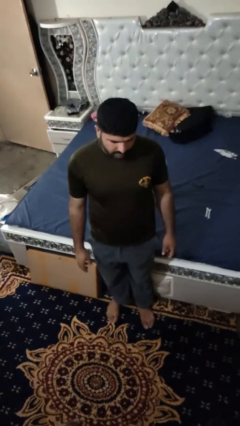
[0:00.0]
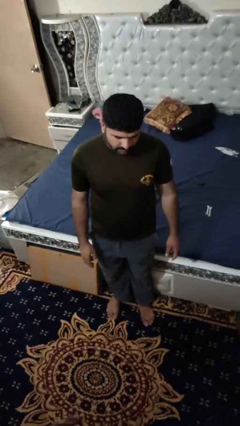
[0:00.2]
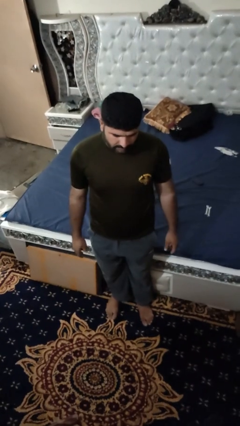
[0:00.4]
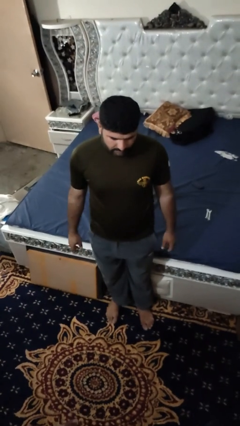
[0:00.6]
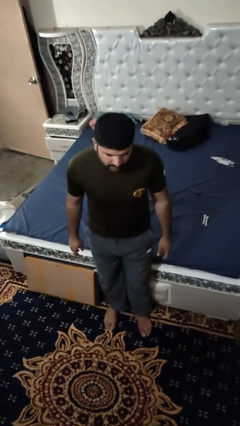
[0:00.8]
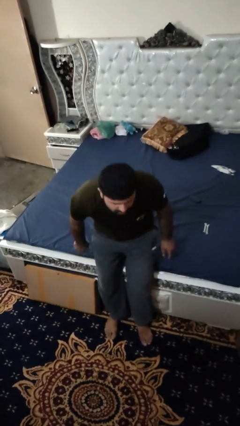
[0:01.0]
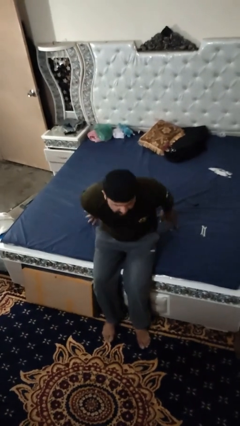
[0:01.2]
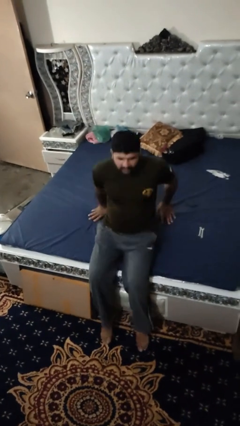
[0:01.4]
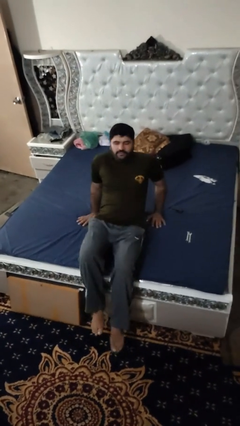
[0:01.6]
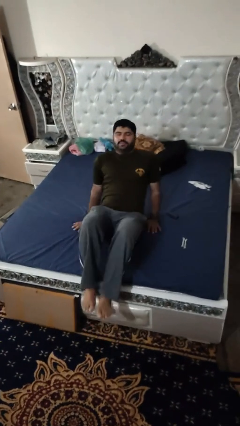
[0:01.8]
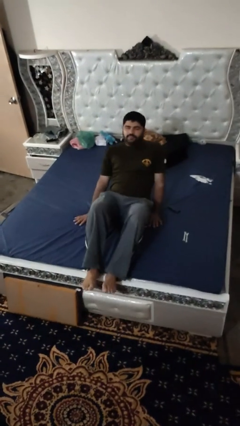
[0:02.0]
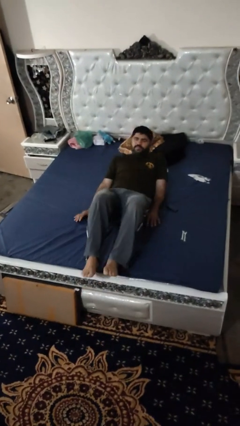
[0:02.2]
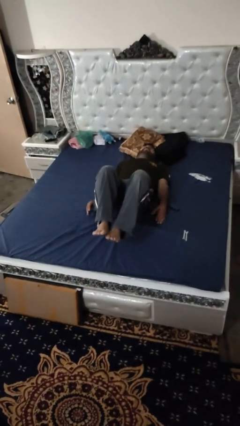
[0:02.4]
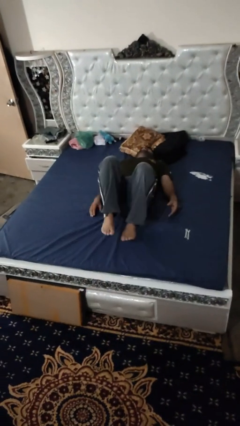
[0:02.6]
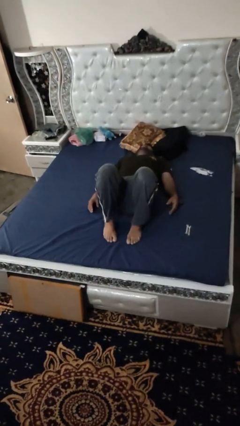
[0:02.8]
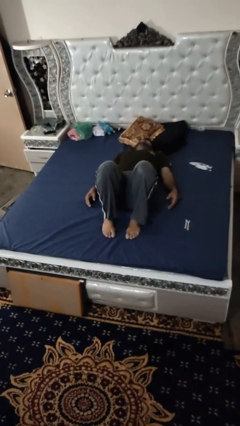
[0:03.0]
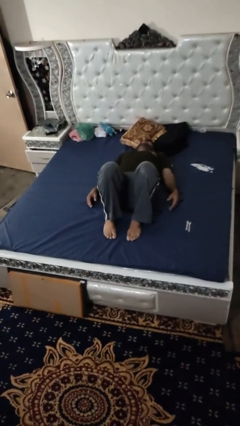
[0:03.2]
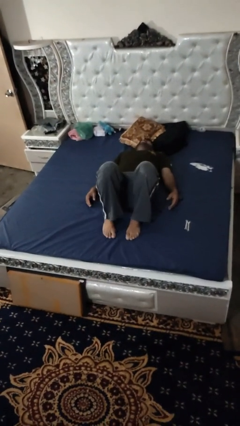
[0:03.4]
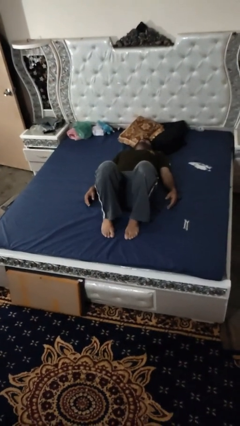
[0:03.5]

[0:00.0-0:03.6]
person lies down on bed

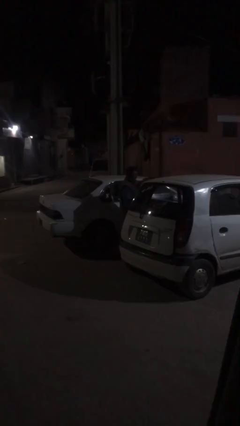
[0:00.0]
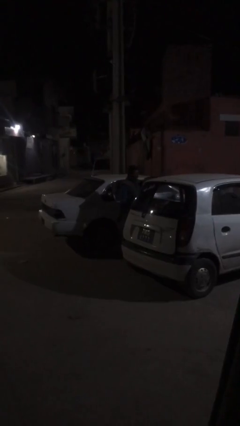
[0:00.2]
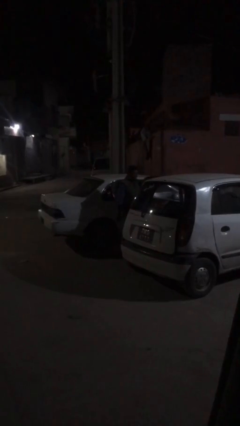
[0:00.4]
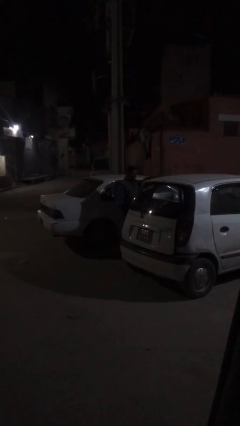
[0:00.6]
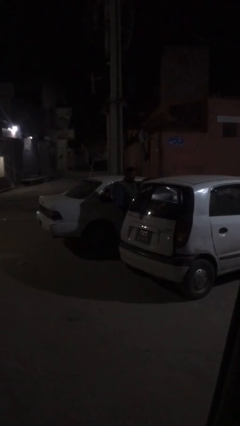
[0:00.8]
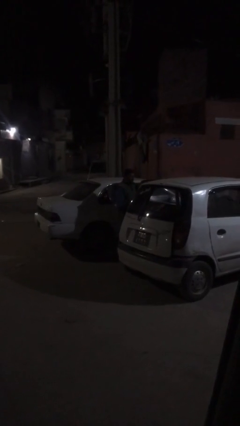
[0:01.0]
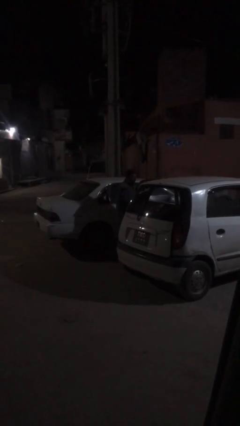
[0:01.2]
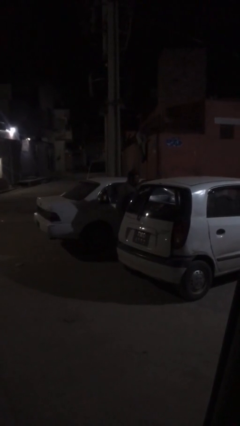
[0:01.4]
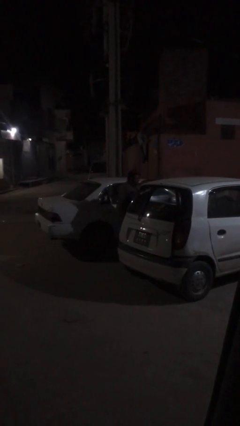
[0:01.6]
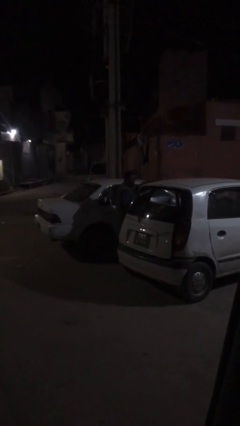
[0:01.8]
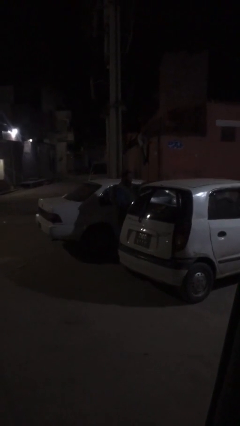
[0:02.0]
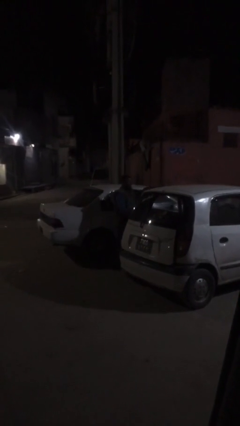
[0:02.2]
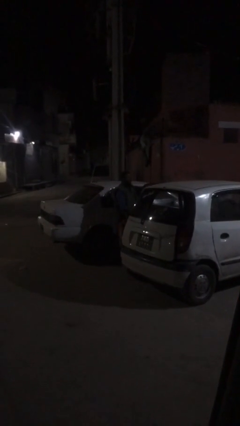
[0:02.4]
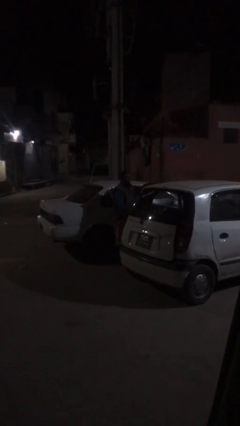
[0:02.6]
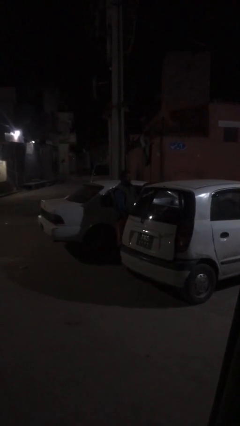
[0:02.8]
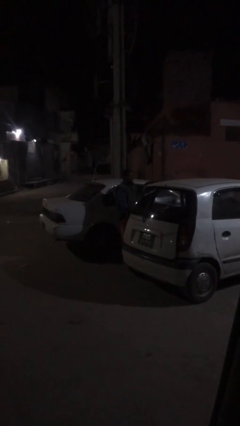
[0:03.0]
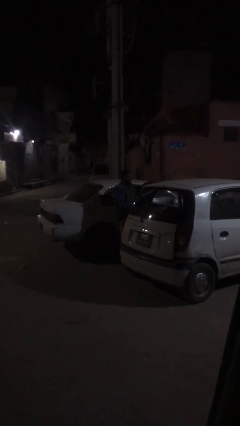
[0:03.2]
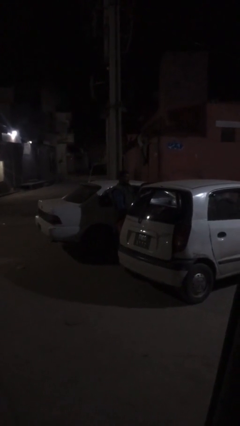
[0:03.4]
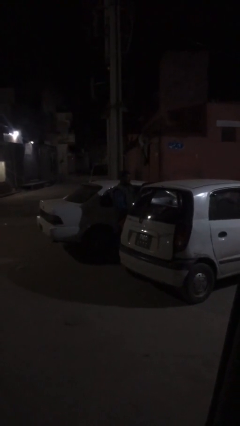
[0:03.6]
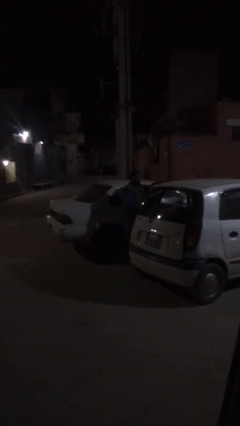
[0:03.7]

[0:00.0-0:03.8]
person unloads car

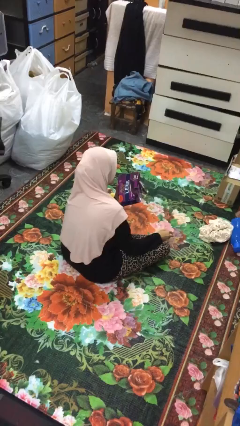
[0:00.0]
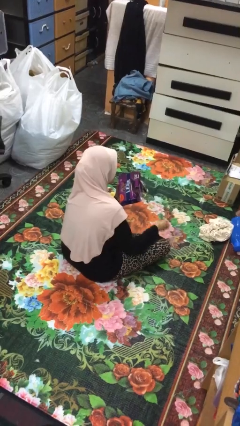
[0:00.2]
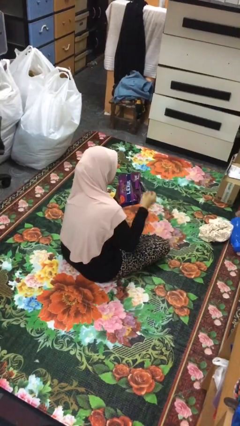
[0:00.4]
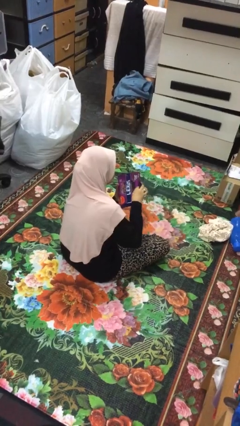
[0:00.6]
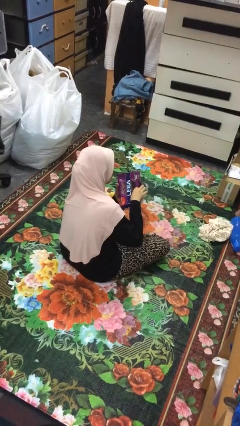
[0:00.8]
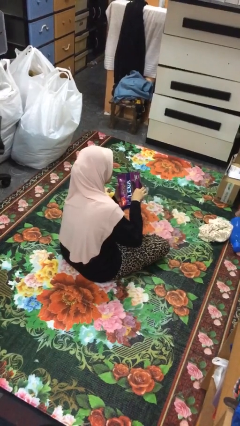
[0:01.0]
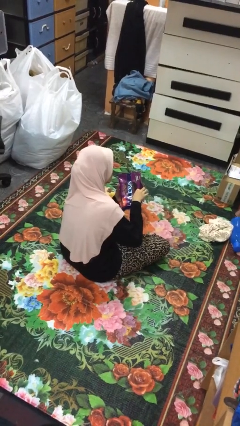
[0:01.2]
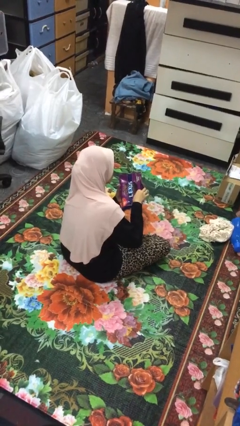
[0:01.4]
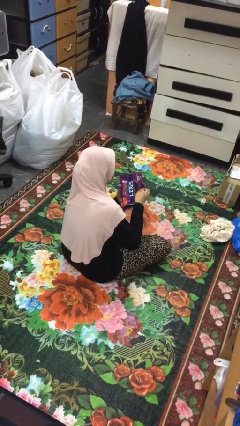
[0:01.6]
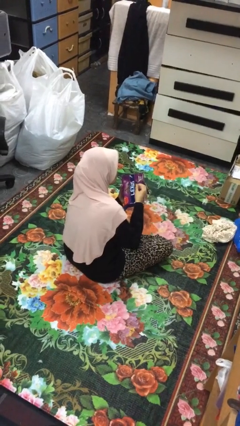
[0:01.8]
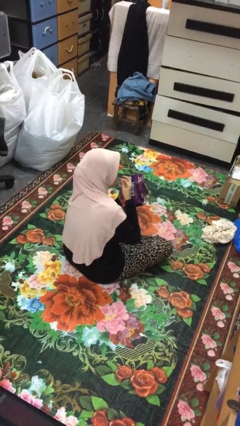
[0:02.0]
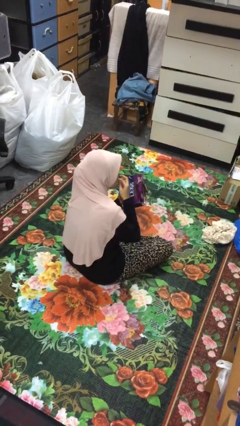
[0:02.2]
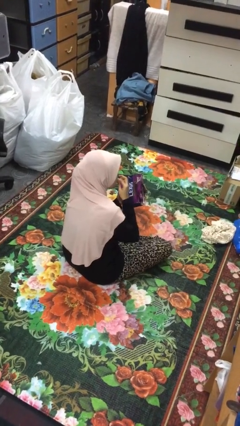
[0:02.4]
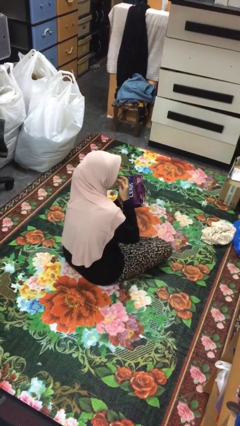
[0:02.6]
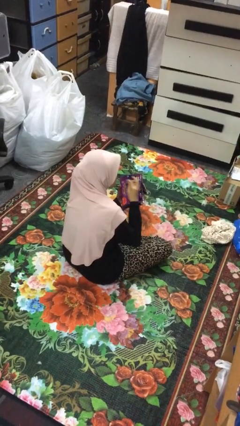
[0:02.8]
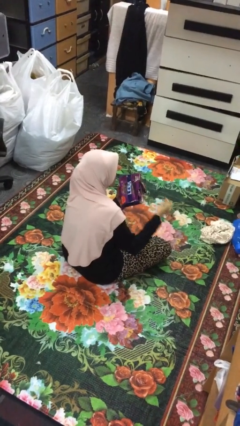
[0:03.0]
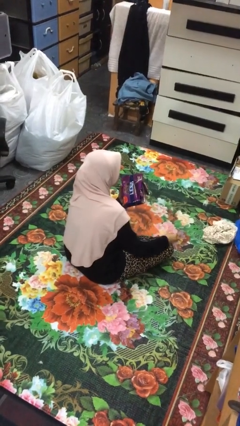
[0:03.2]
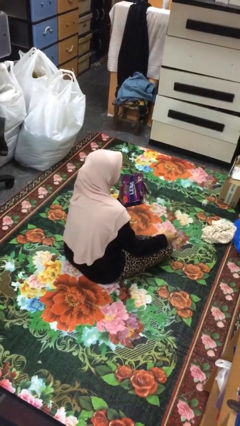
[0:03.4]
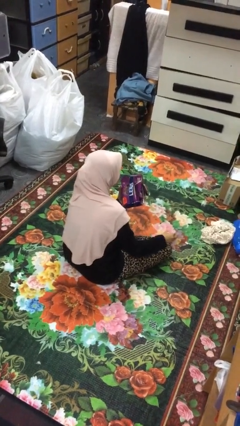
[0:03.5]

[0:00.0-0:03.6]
person eats snack from bag

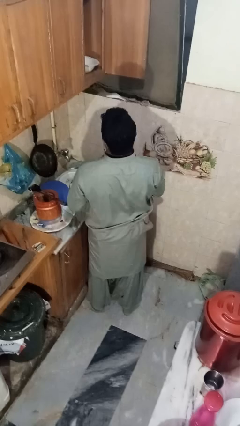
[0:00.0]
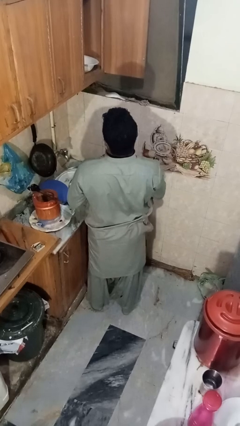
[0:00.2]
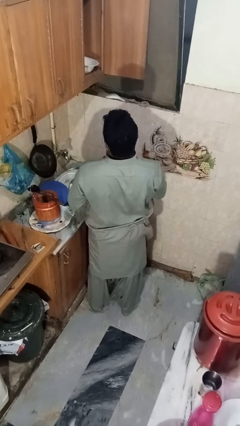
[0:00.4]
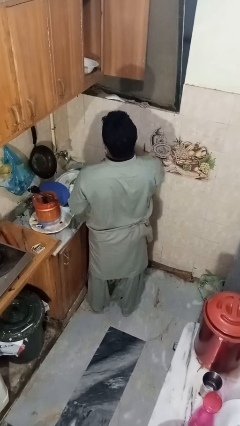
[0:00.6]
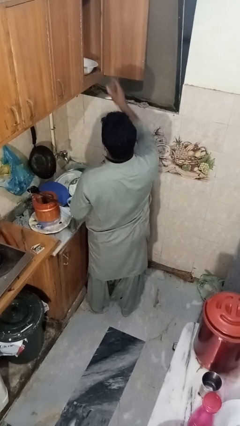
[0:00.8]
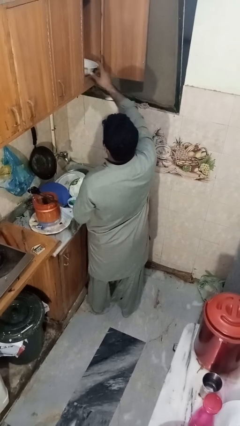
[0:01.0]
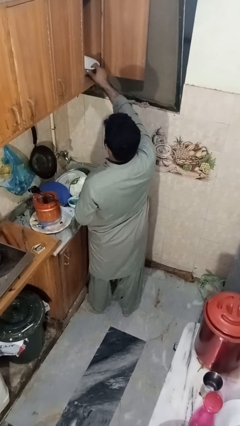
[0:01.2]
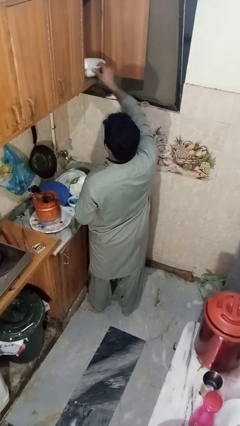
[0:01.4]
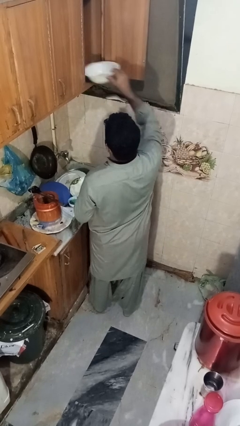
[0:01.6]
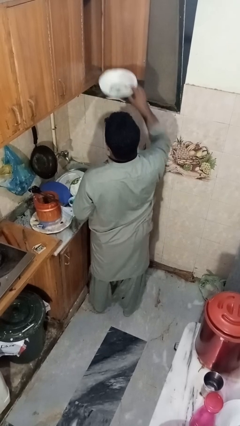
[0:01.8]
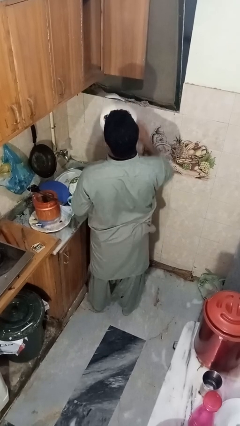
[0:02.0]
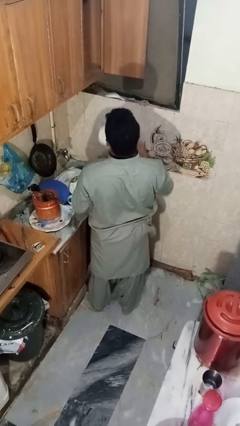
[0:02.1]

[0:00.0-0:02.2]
person takes object from cabinet

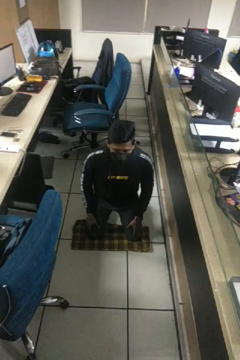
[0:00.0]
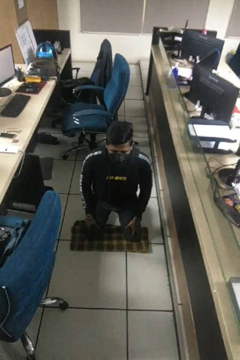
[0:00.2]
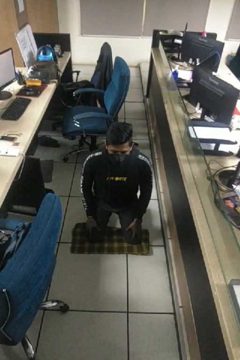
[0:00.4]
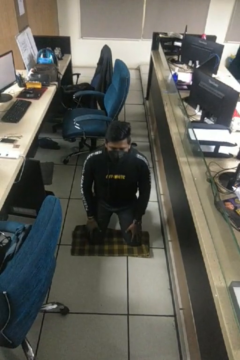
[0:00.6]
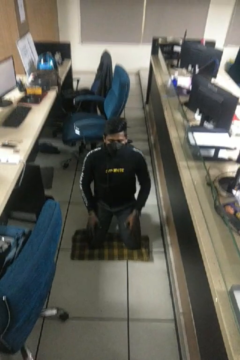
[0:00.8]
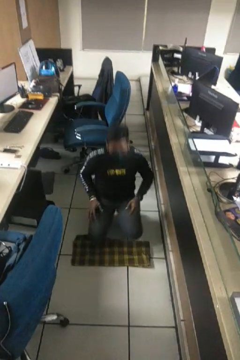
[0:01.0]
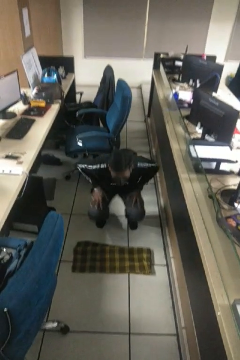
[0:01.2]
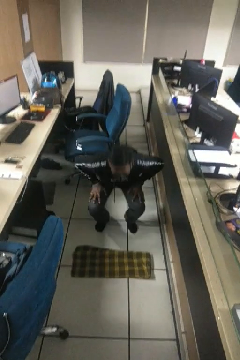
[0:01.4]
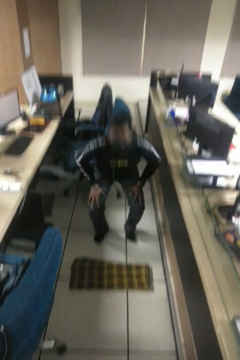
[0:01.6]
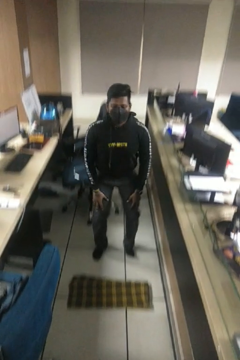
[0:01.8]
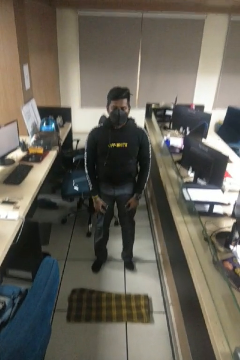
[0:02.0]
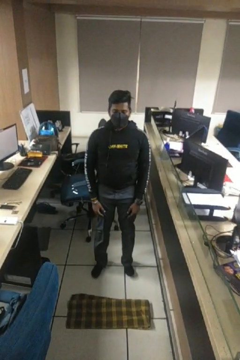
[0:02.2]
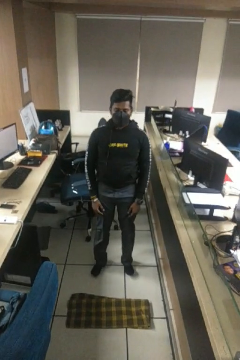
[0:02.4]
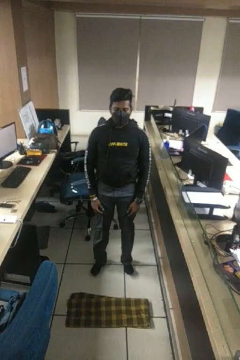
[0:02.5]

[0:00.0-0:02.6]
person stands up from floor

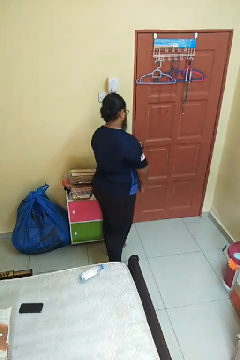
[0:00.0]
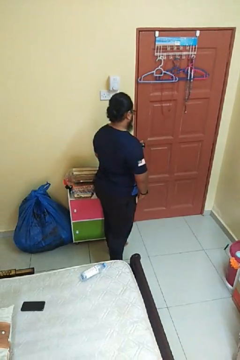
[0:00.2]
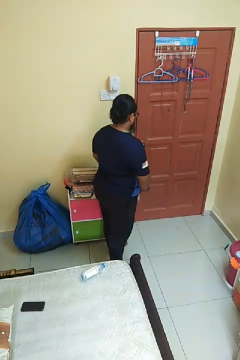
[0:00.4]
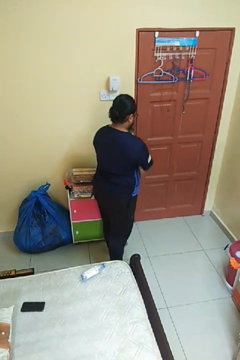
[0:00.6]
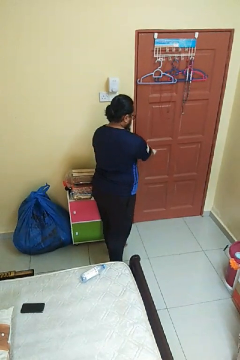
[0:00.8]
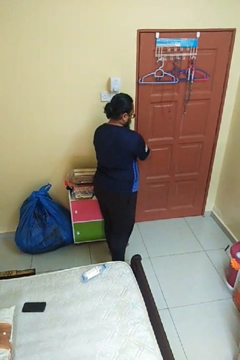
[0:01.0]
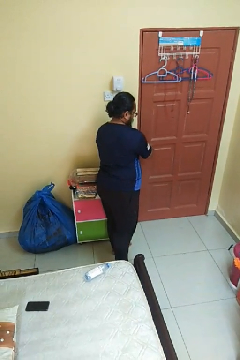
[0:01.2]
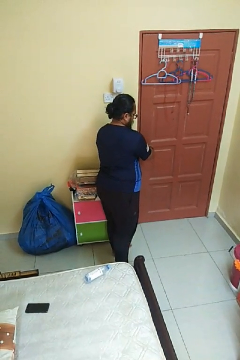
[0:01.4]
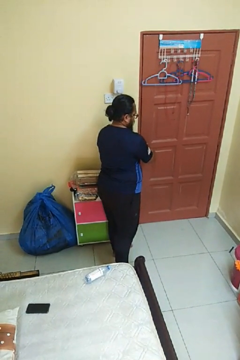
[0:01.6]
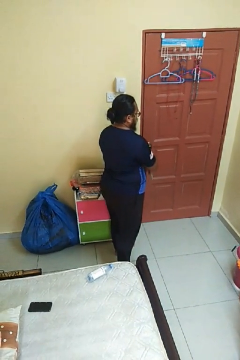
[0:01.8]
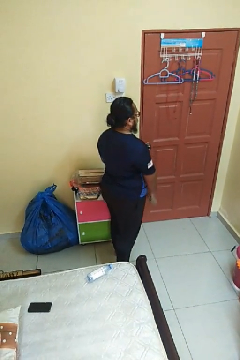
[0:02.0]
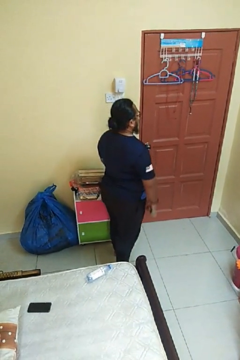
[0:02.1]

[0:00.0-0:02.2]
person locks door with keys

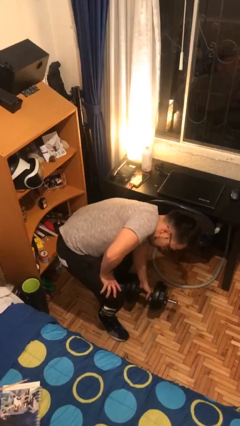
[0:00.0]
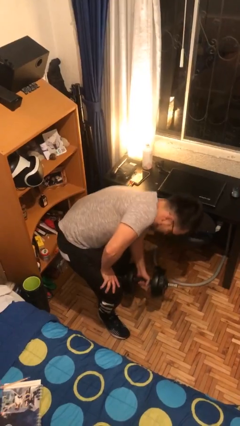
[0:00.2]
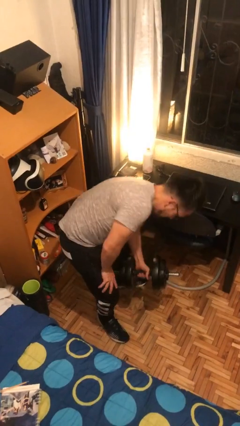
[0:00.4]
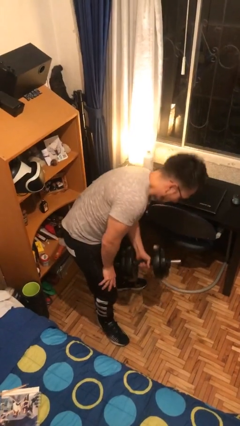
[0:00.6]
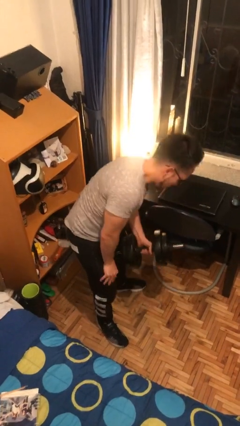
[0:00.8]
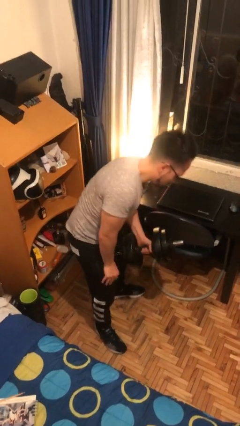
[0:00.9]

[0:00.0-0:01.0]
person picks up object from floor
